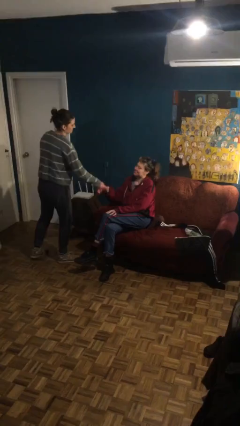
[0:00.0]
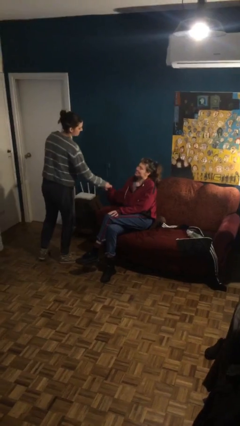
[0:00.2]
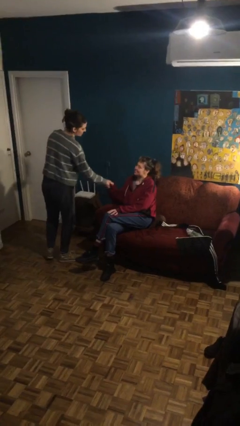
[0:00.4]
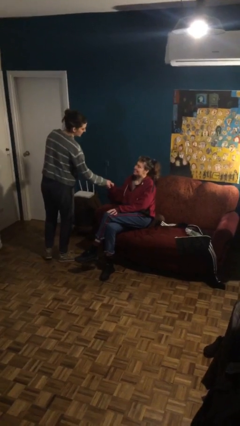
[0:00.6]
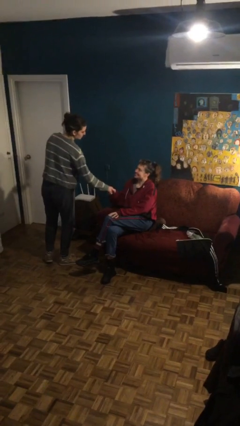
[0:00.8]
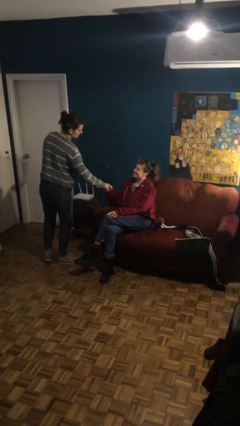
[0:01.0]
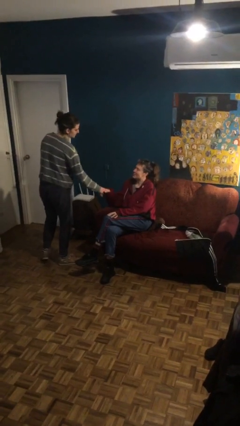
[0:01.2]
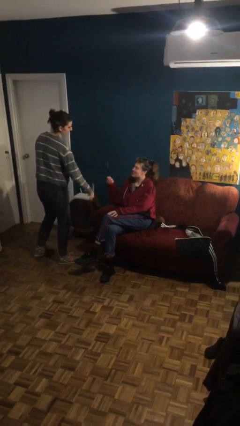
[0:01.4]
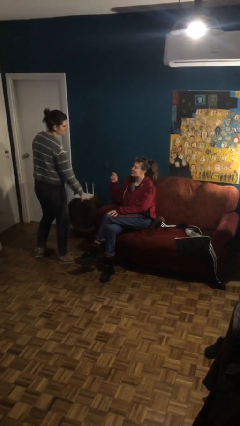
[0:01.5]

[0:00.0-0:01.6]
person shakes hand

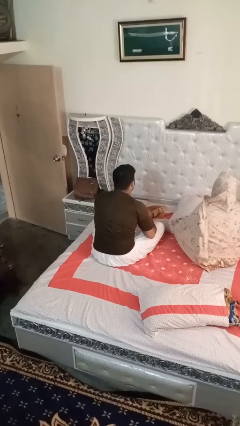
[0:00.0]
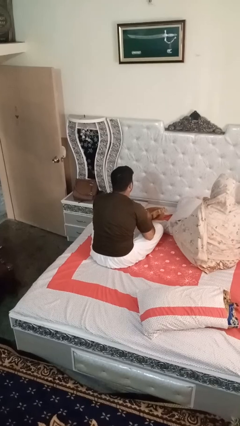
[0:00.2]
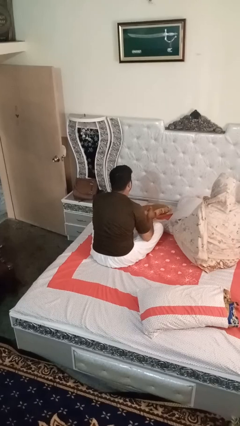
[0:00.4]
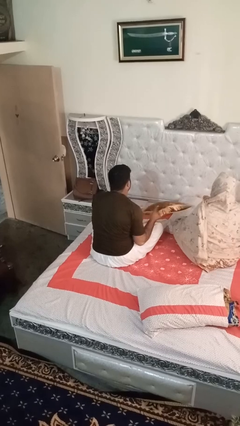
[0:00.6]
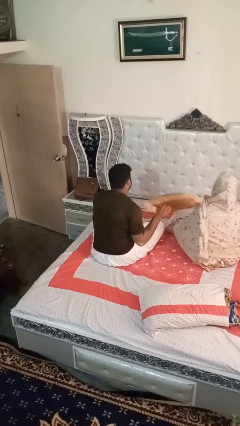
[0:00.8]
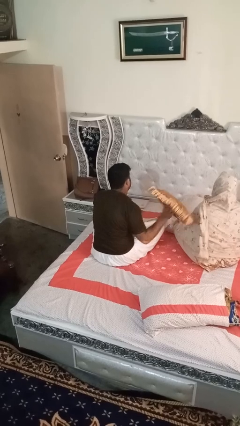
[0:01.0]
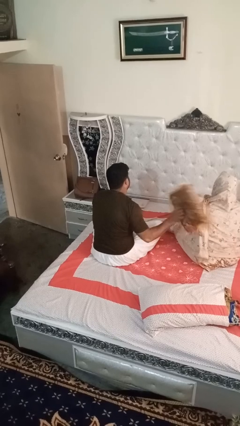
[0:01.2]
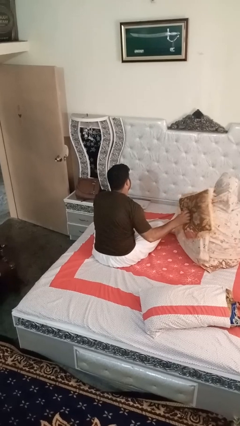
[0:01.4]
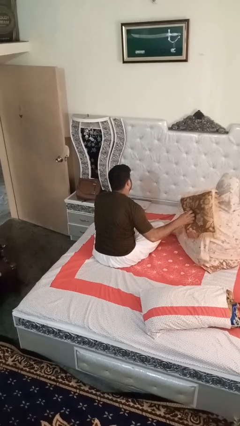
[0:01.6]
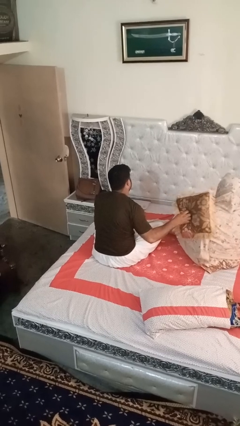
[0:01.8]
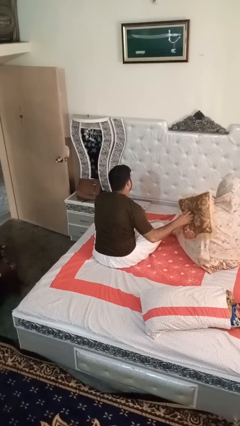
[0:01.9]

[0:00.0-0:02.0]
person hits person with pillow

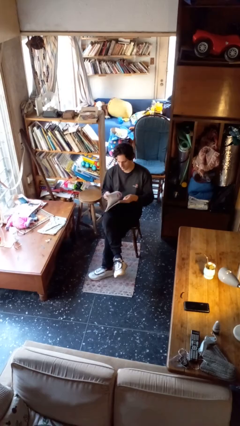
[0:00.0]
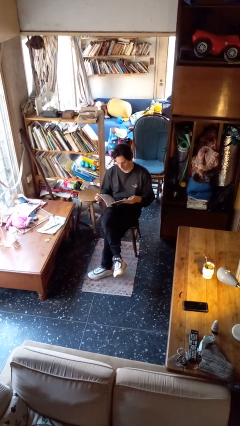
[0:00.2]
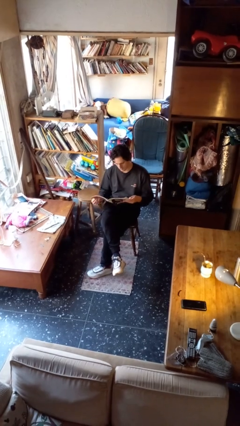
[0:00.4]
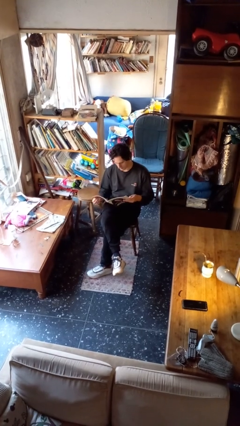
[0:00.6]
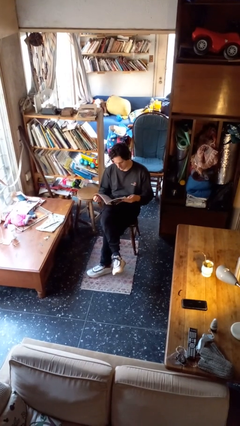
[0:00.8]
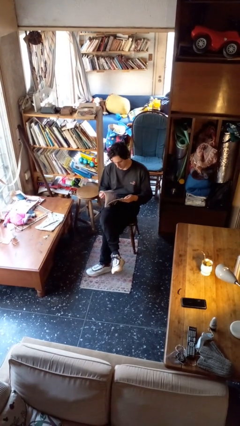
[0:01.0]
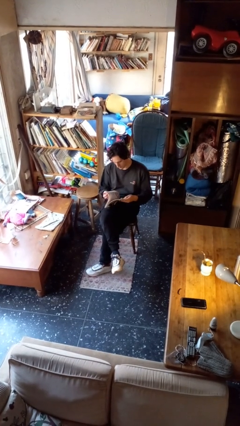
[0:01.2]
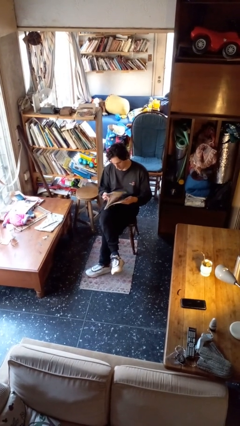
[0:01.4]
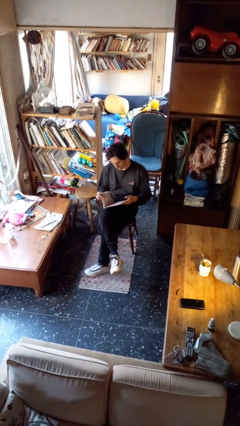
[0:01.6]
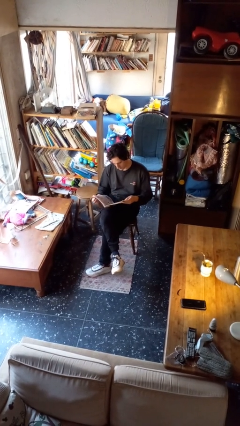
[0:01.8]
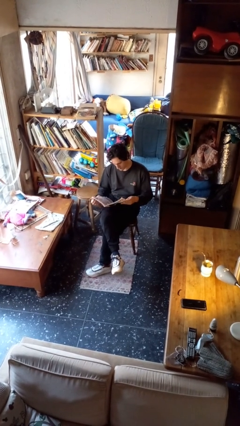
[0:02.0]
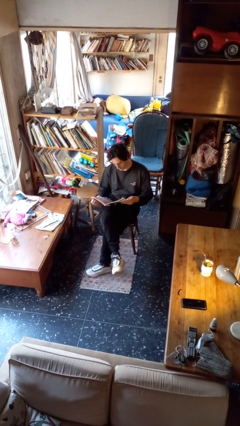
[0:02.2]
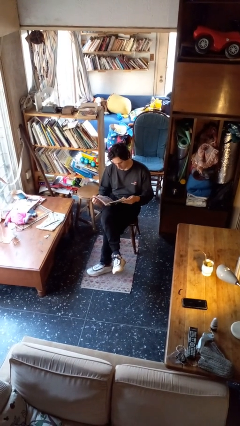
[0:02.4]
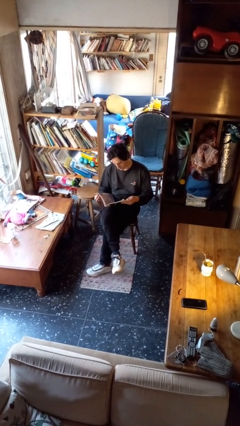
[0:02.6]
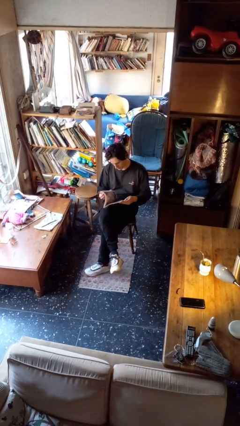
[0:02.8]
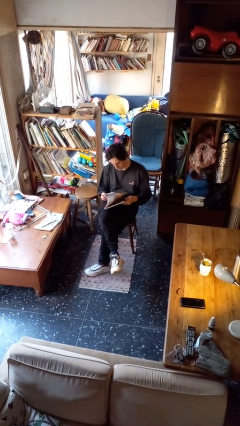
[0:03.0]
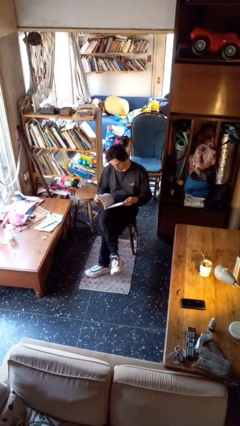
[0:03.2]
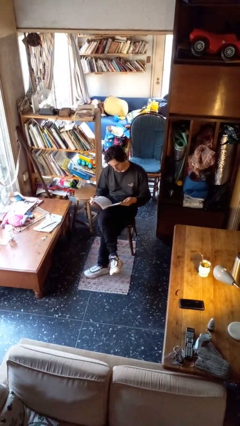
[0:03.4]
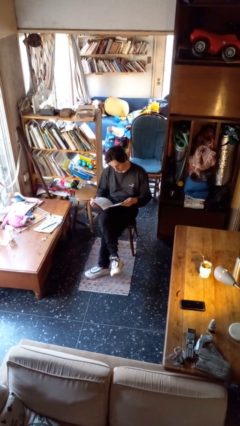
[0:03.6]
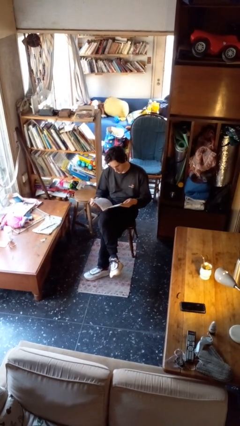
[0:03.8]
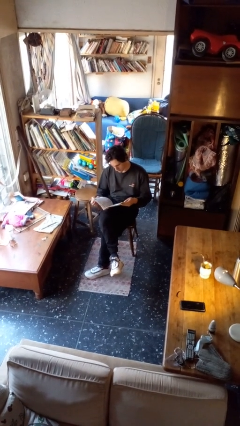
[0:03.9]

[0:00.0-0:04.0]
person reads magazine

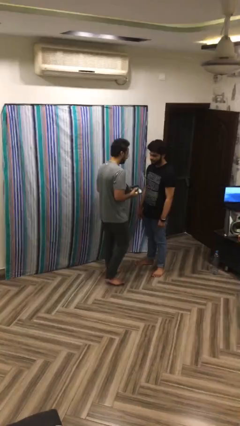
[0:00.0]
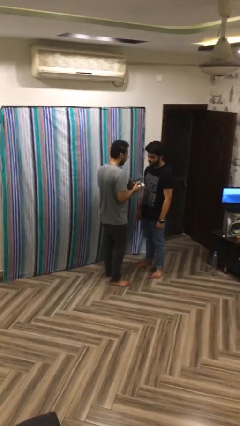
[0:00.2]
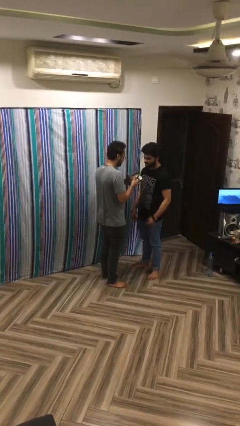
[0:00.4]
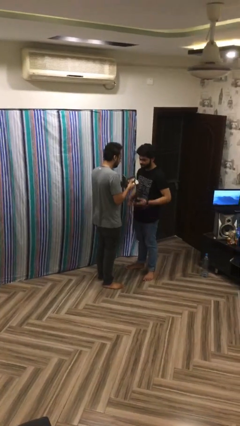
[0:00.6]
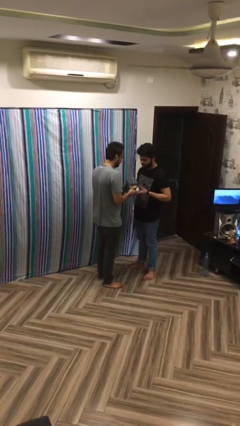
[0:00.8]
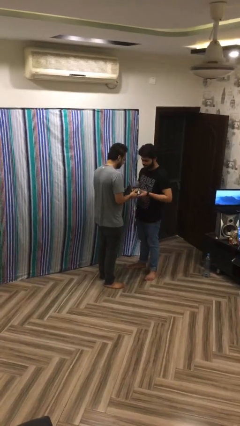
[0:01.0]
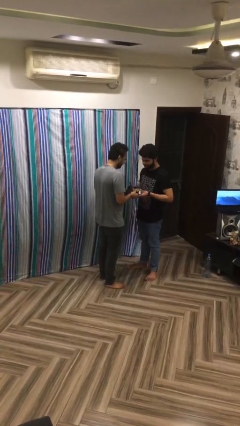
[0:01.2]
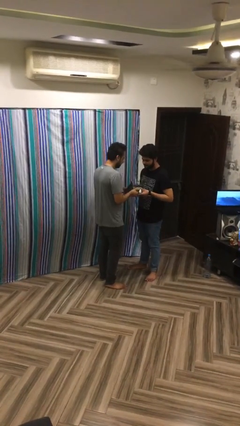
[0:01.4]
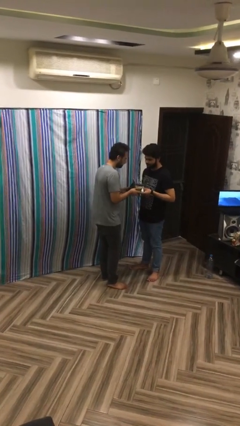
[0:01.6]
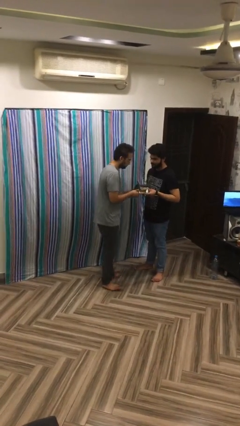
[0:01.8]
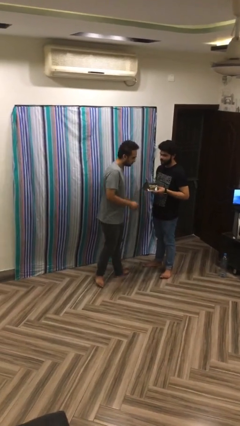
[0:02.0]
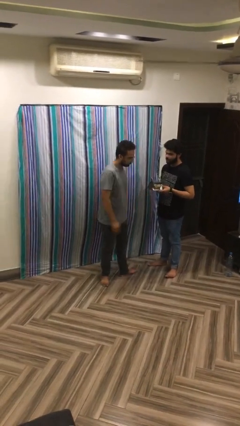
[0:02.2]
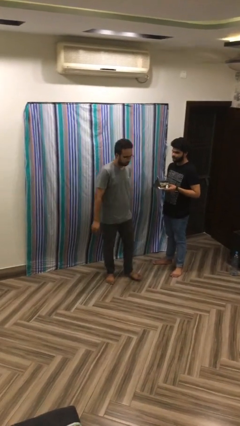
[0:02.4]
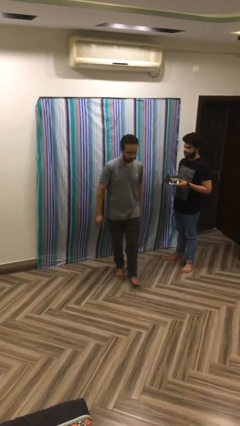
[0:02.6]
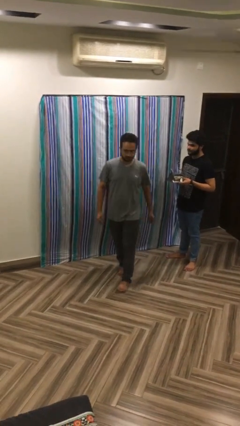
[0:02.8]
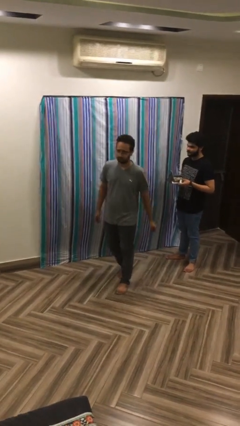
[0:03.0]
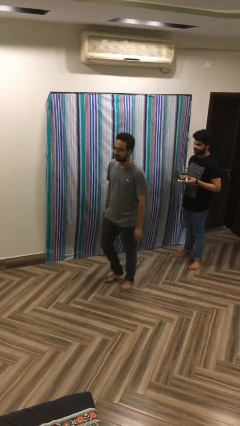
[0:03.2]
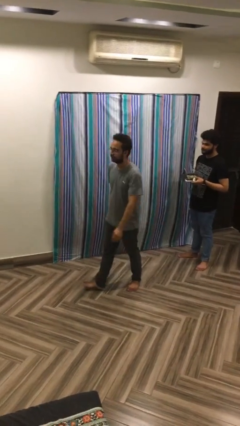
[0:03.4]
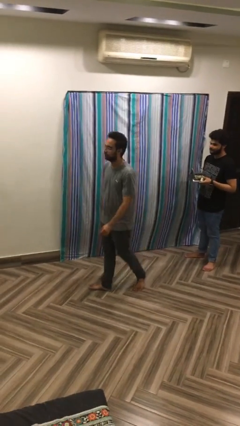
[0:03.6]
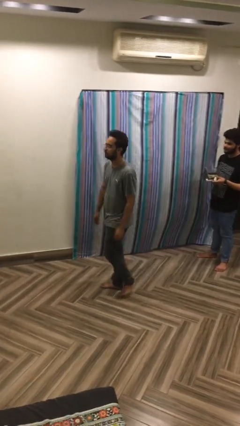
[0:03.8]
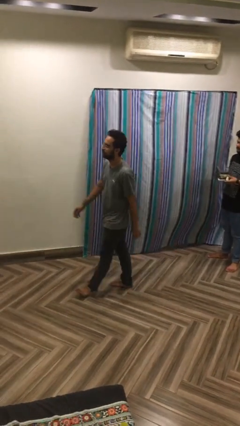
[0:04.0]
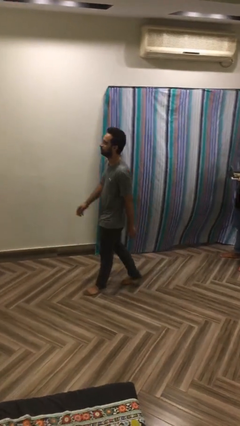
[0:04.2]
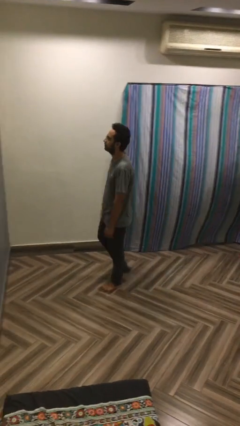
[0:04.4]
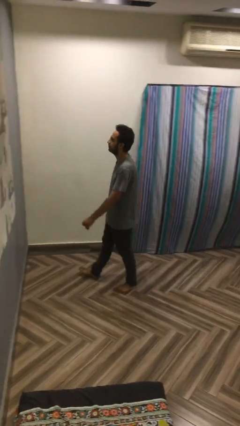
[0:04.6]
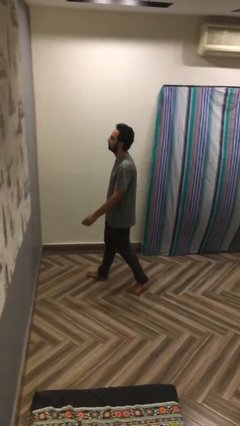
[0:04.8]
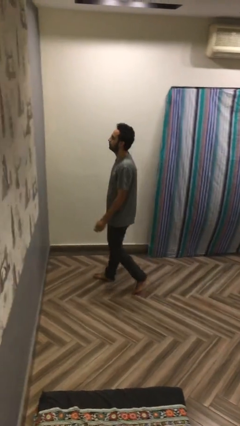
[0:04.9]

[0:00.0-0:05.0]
person transfers object to person

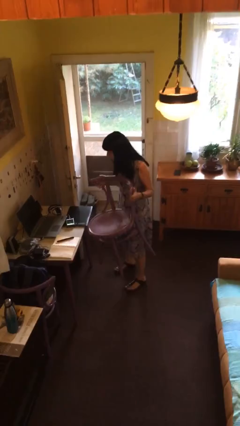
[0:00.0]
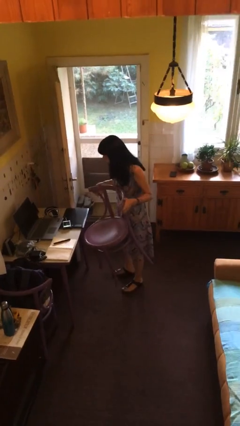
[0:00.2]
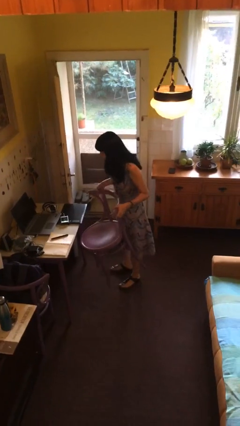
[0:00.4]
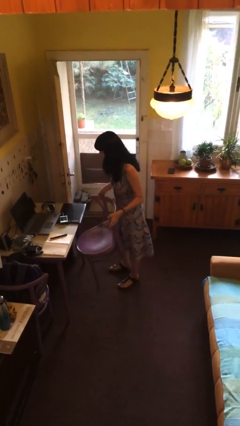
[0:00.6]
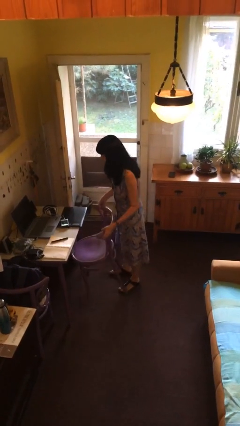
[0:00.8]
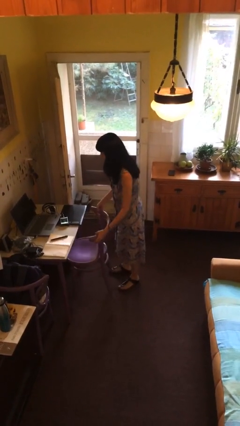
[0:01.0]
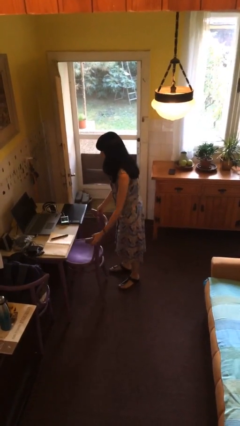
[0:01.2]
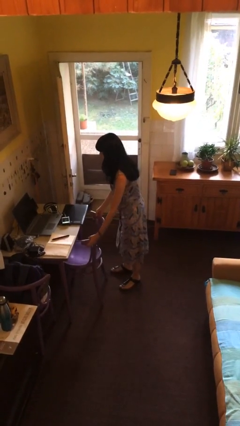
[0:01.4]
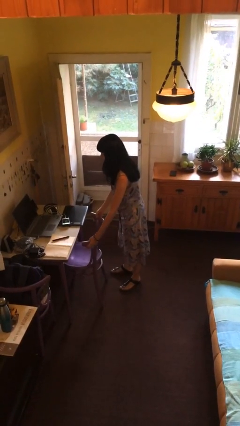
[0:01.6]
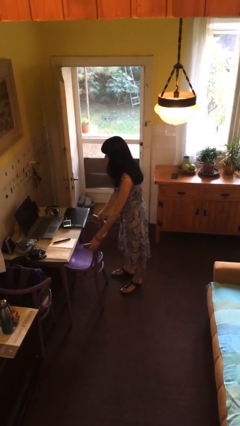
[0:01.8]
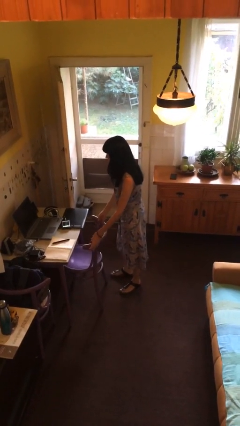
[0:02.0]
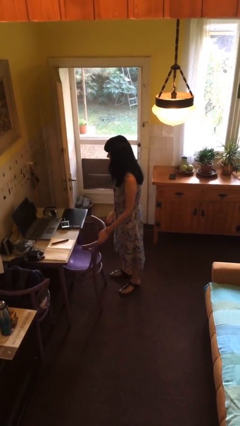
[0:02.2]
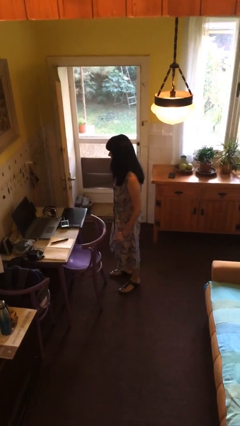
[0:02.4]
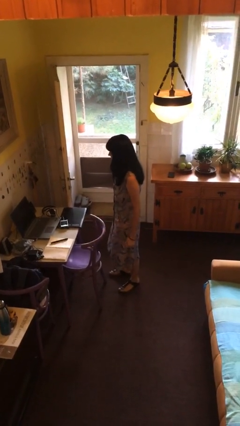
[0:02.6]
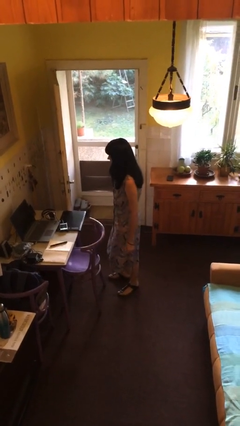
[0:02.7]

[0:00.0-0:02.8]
person puts down object on floor

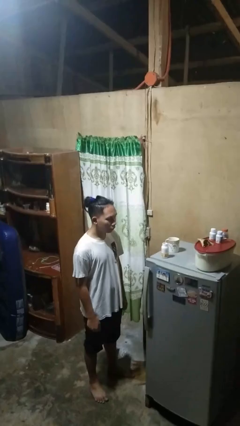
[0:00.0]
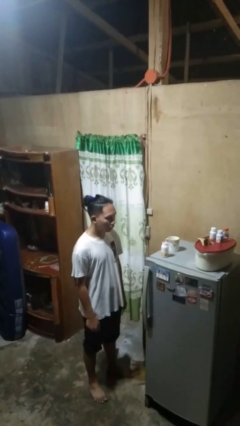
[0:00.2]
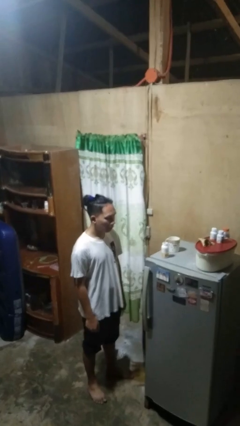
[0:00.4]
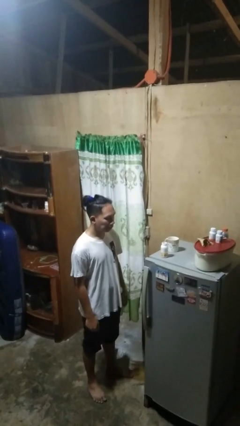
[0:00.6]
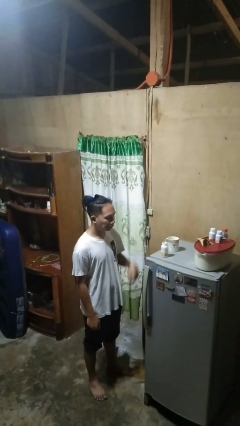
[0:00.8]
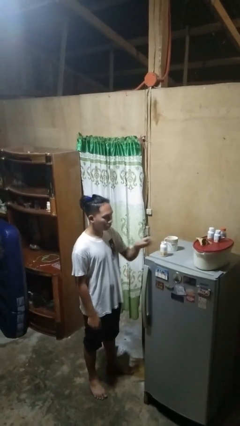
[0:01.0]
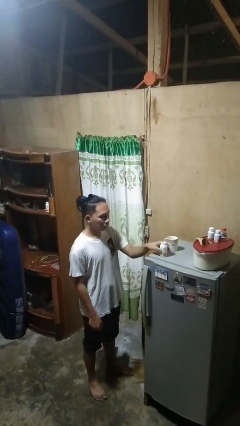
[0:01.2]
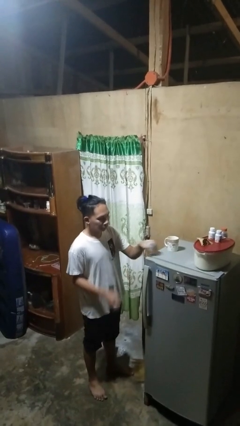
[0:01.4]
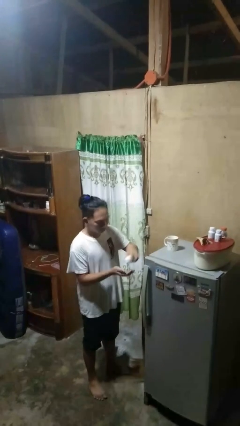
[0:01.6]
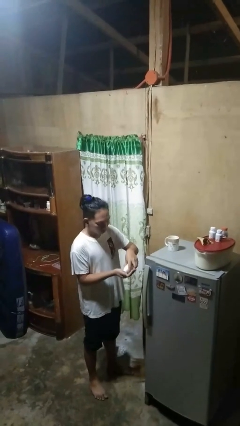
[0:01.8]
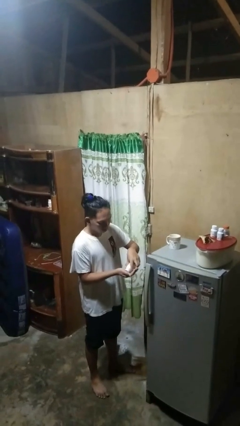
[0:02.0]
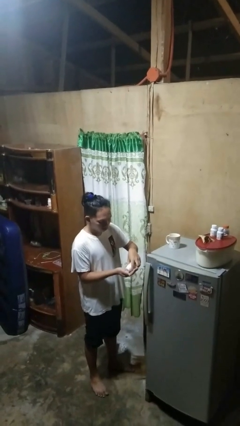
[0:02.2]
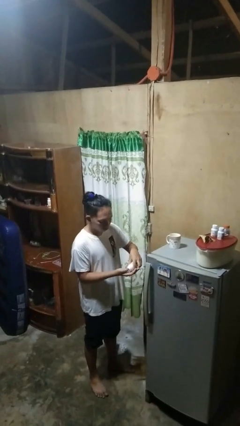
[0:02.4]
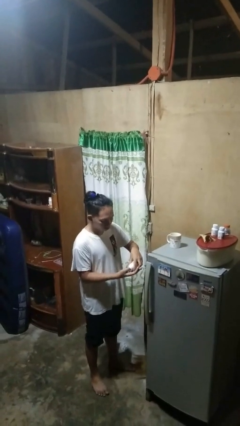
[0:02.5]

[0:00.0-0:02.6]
person takes medicine pills
